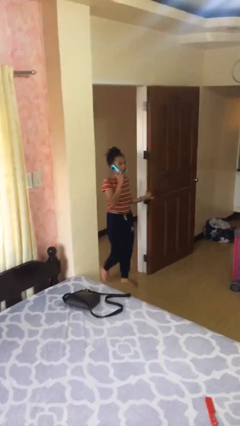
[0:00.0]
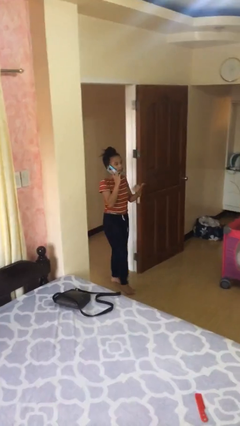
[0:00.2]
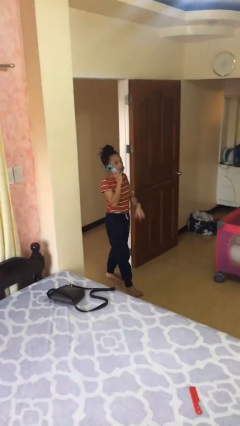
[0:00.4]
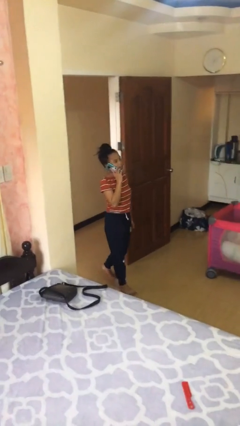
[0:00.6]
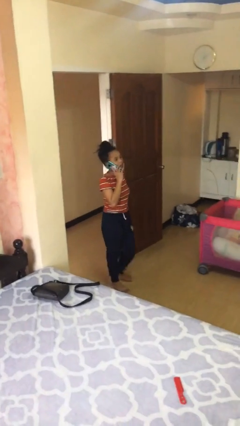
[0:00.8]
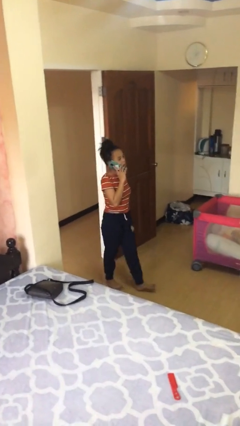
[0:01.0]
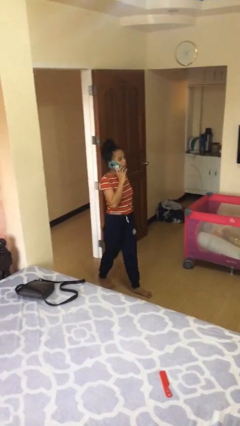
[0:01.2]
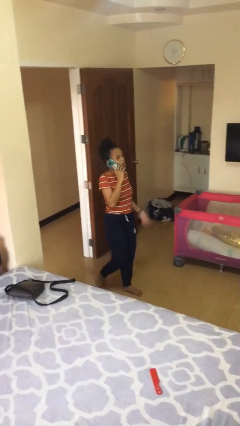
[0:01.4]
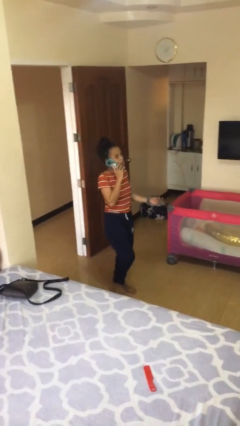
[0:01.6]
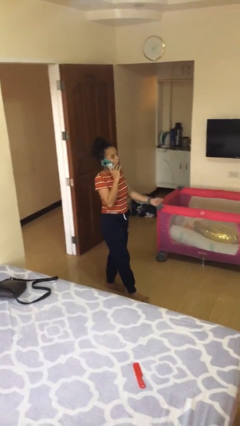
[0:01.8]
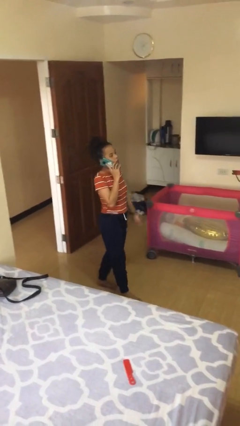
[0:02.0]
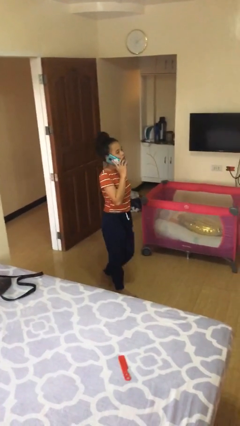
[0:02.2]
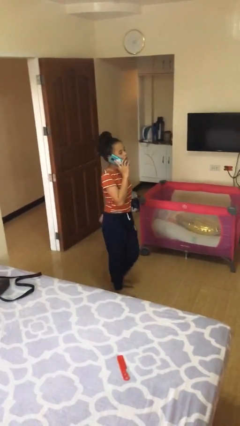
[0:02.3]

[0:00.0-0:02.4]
person enters scene through structure

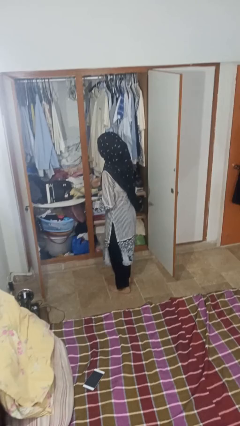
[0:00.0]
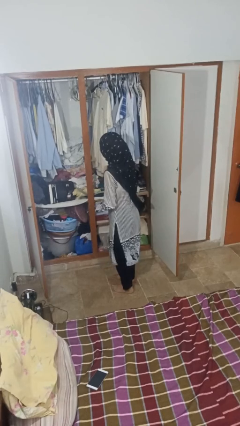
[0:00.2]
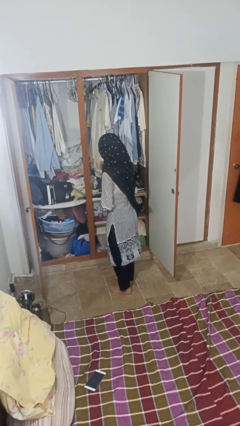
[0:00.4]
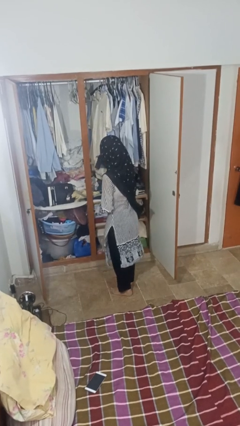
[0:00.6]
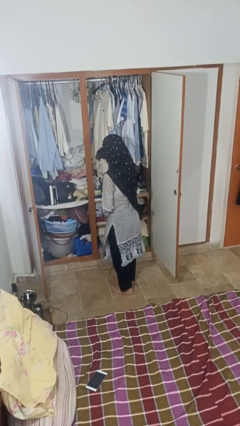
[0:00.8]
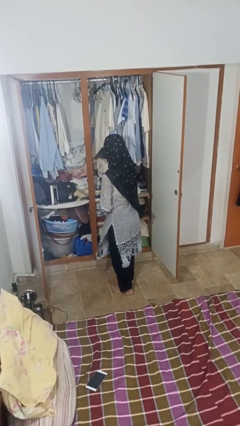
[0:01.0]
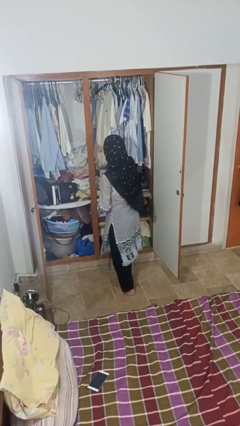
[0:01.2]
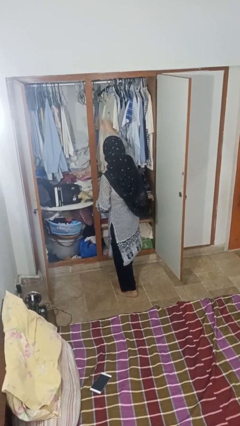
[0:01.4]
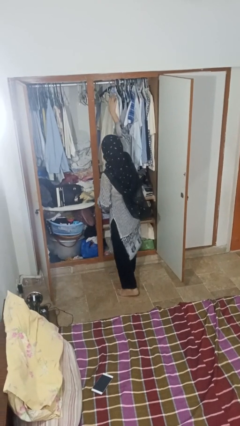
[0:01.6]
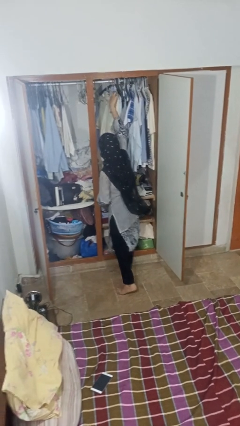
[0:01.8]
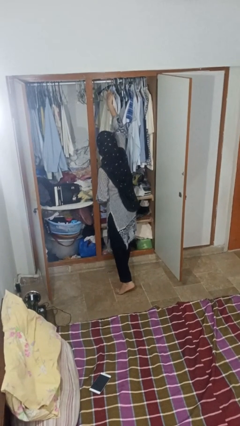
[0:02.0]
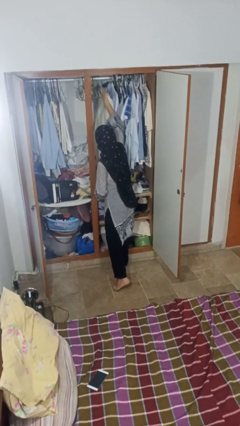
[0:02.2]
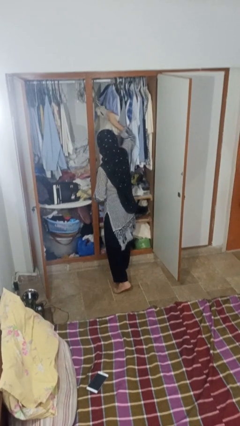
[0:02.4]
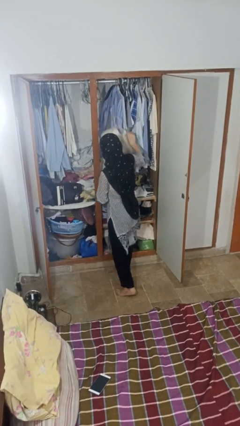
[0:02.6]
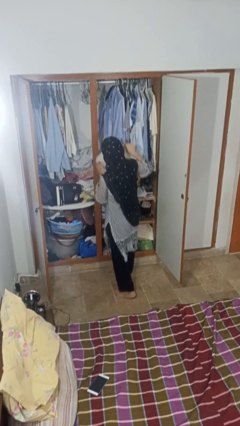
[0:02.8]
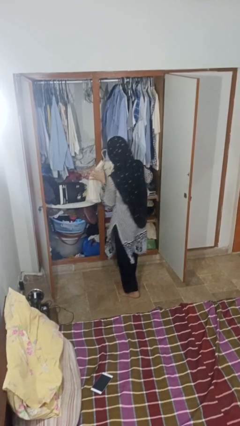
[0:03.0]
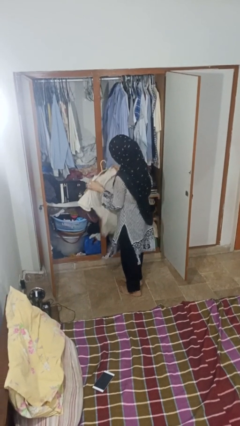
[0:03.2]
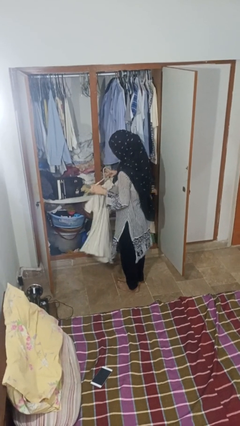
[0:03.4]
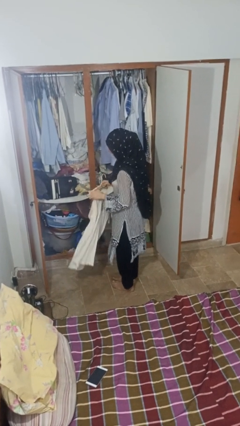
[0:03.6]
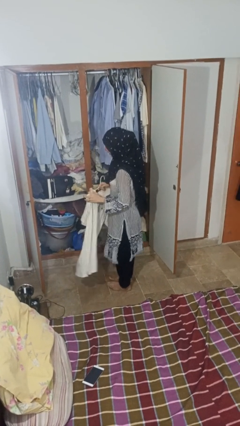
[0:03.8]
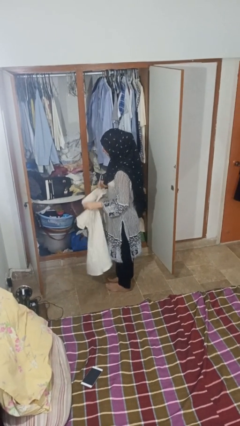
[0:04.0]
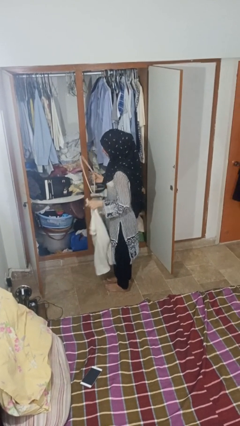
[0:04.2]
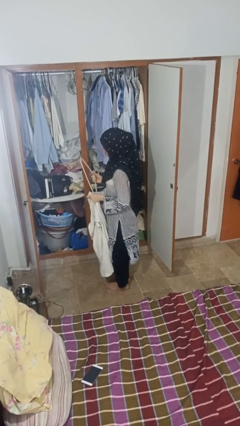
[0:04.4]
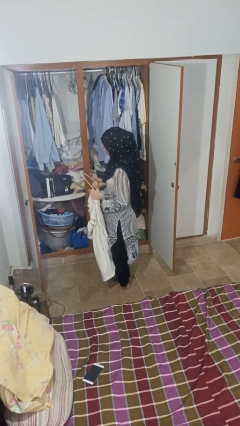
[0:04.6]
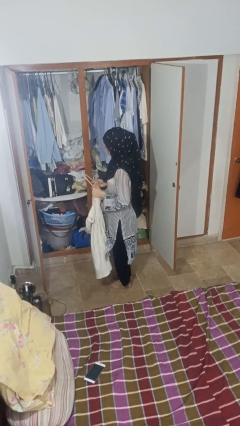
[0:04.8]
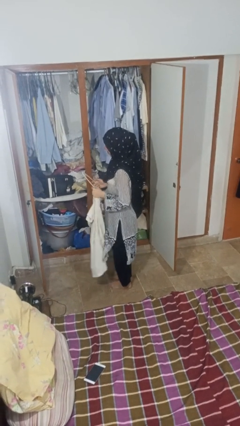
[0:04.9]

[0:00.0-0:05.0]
person takes clothes from closet

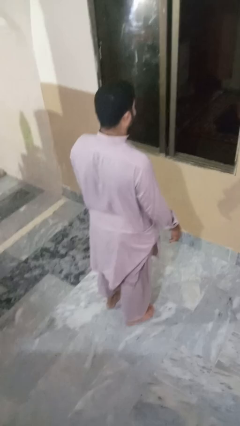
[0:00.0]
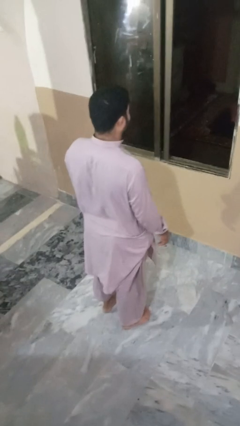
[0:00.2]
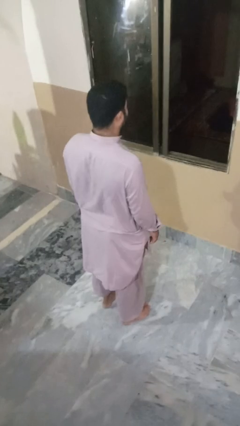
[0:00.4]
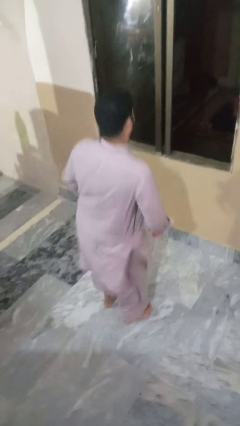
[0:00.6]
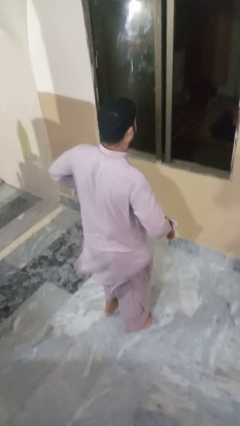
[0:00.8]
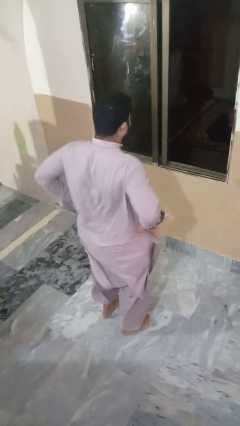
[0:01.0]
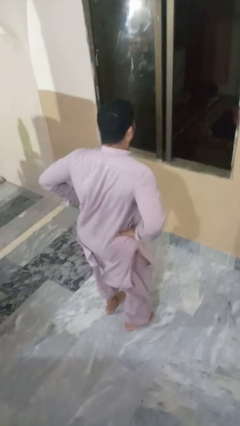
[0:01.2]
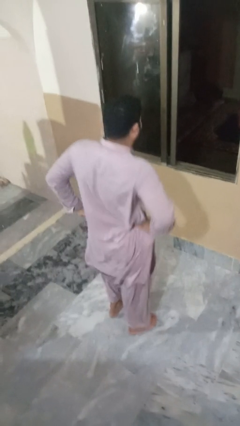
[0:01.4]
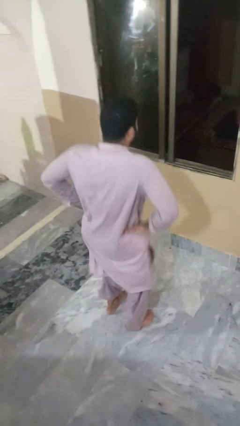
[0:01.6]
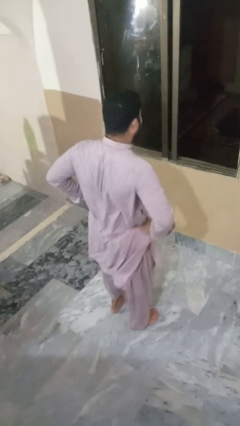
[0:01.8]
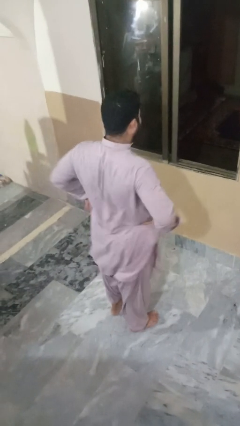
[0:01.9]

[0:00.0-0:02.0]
person wiggles hips

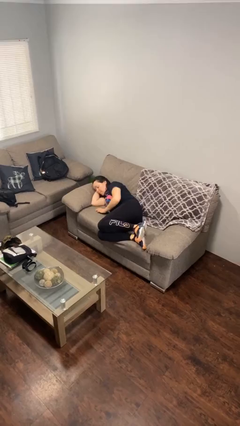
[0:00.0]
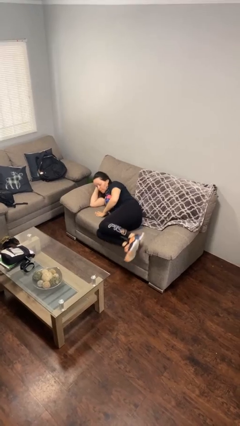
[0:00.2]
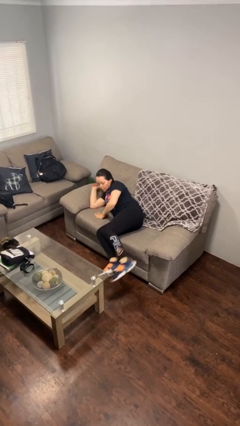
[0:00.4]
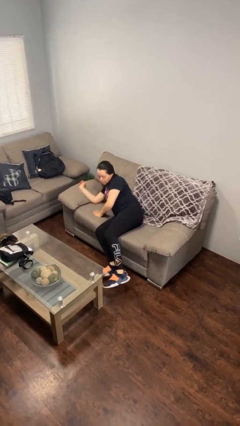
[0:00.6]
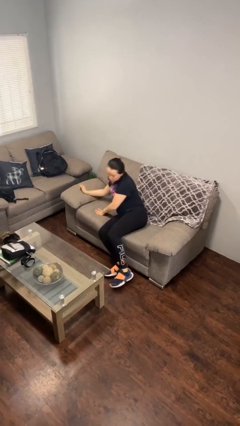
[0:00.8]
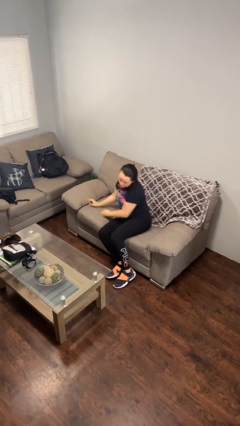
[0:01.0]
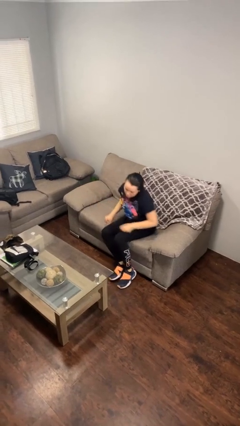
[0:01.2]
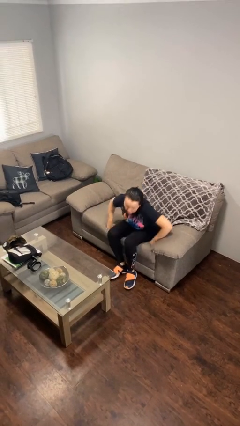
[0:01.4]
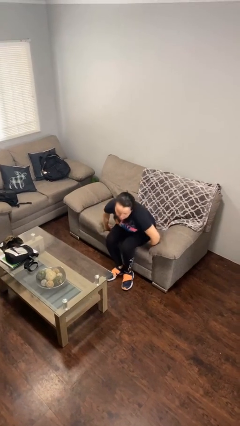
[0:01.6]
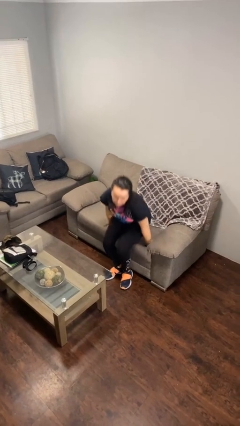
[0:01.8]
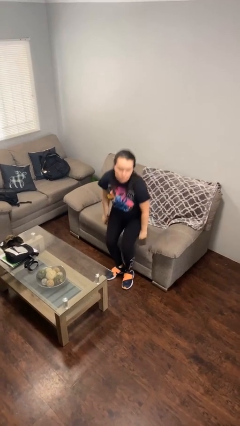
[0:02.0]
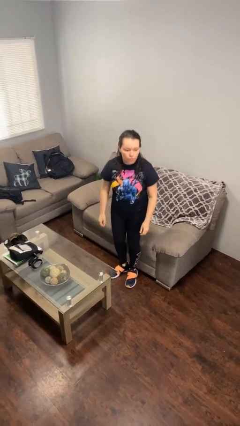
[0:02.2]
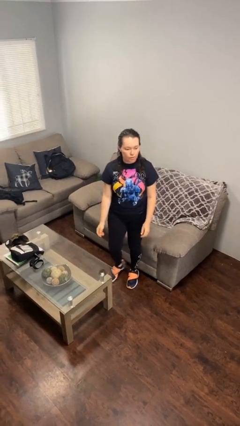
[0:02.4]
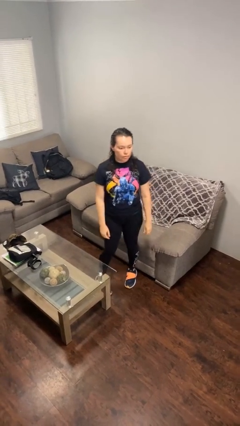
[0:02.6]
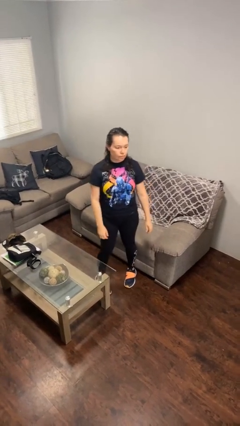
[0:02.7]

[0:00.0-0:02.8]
person stands up

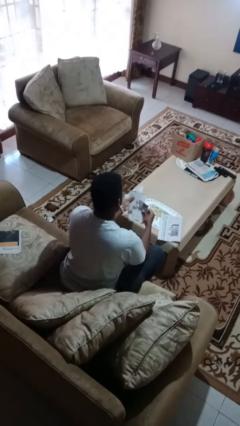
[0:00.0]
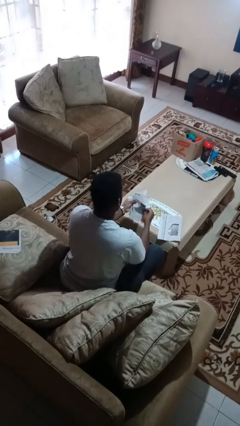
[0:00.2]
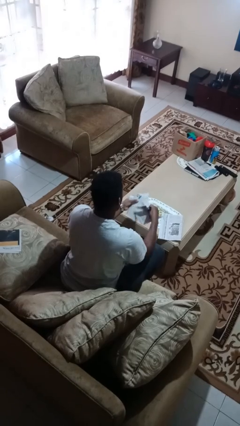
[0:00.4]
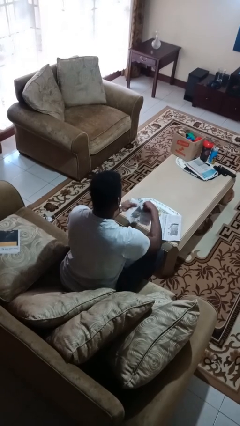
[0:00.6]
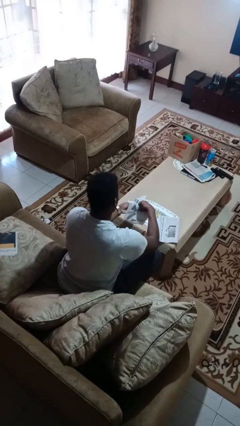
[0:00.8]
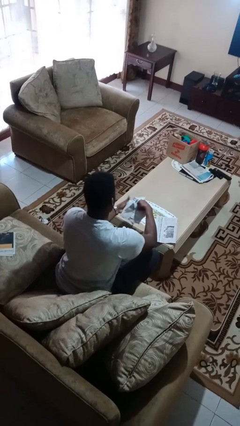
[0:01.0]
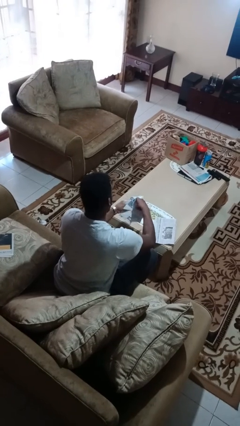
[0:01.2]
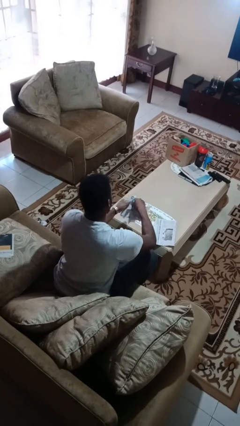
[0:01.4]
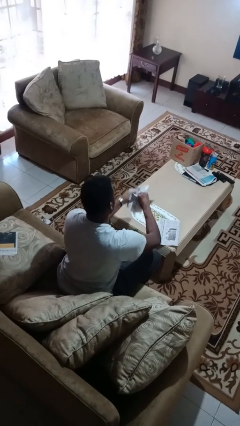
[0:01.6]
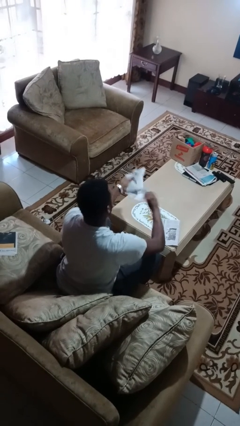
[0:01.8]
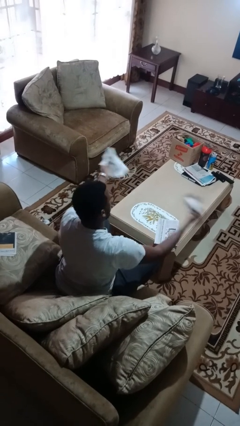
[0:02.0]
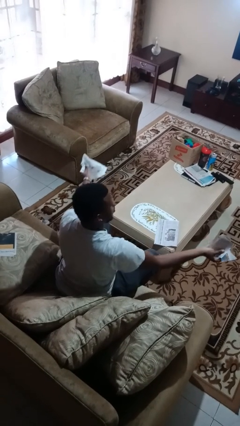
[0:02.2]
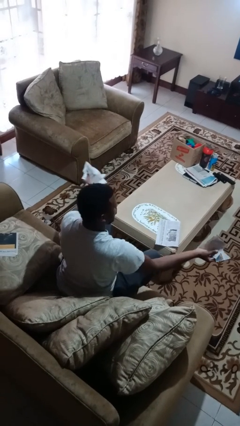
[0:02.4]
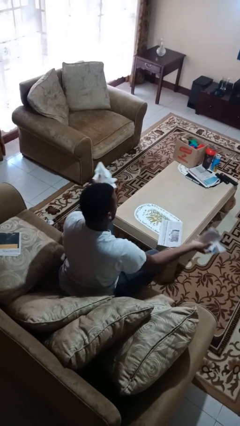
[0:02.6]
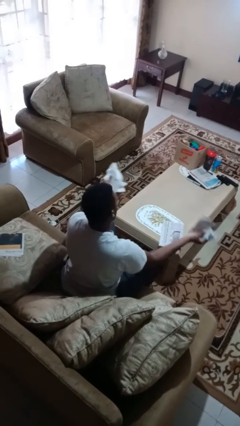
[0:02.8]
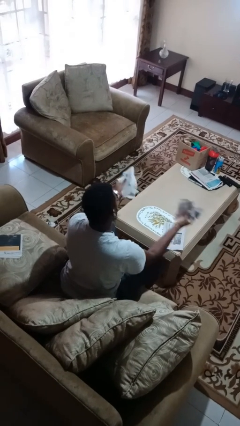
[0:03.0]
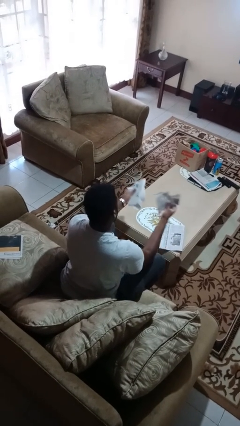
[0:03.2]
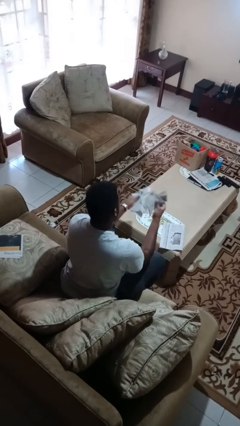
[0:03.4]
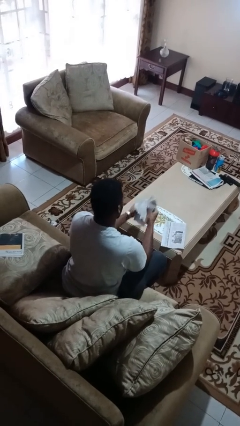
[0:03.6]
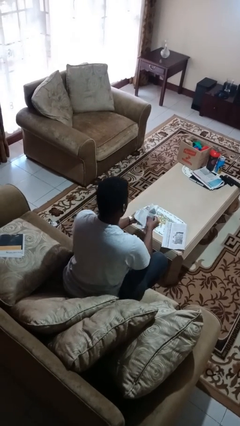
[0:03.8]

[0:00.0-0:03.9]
person tears paper

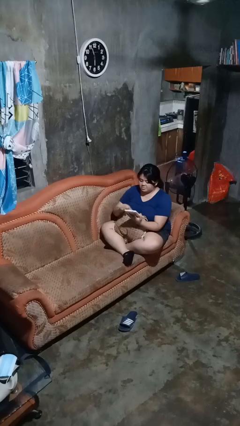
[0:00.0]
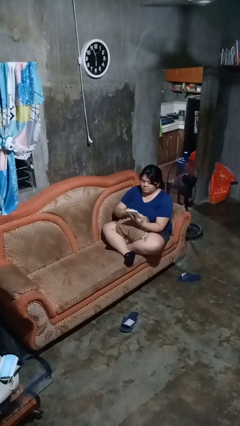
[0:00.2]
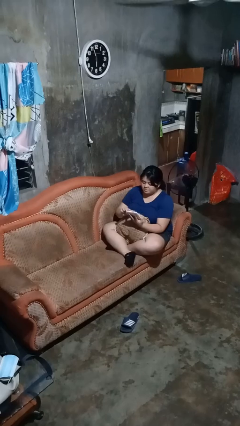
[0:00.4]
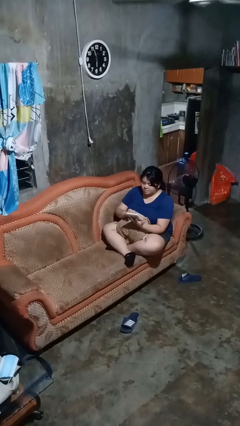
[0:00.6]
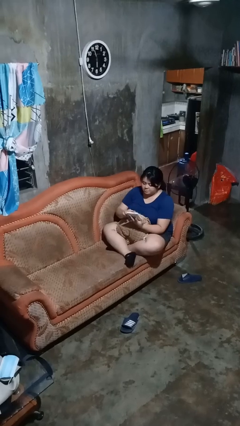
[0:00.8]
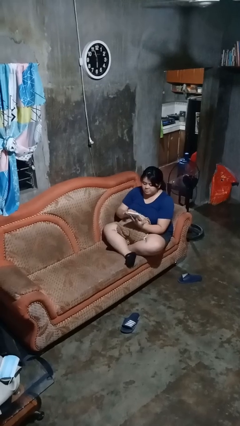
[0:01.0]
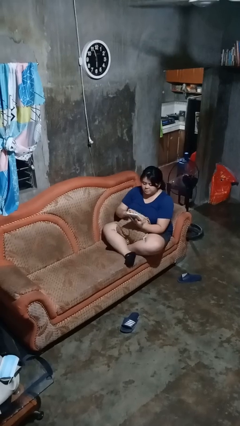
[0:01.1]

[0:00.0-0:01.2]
person interacts with tablet

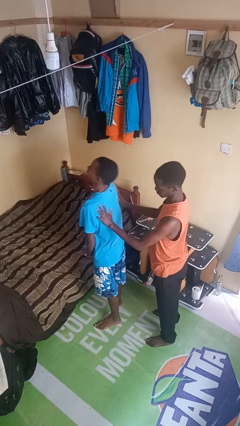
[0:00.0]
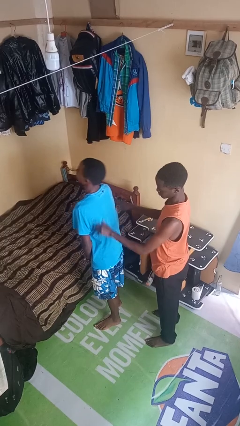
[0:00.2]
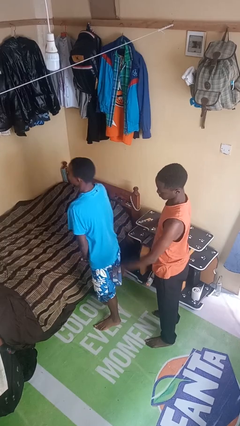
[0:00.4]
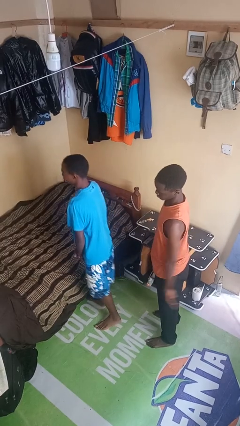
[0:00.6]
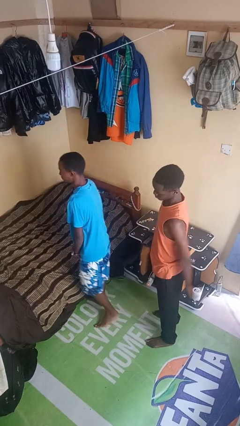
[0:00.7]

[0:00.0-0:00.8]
person shoves person
